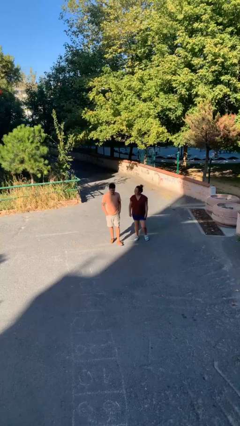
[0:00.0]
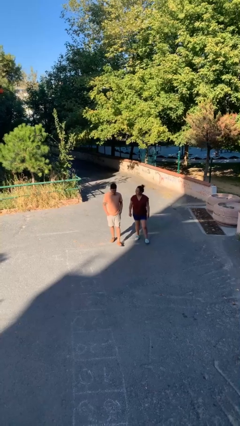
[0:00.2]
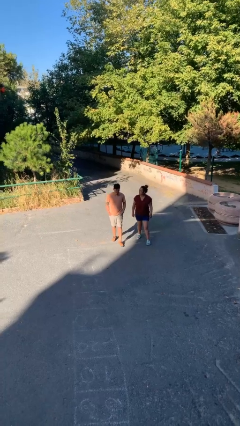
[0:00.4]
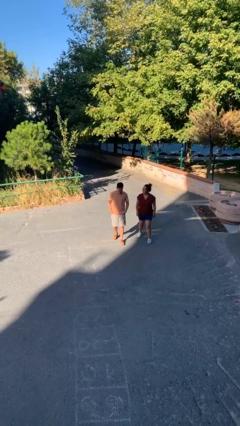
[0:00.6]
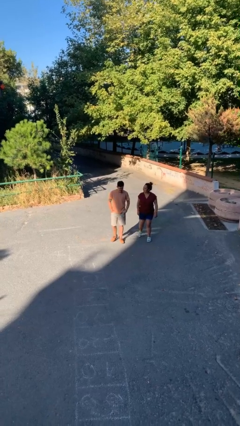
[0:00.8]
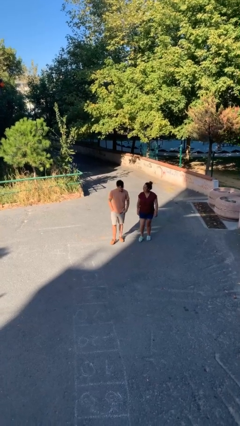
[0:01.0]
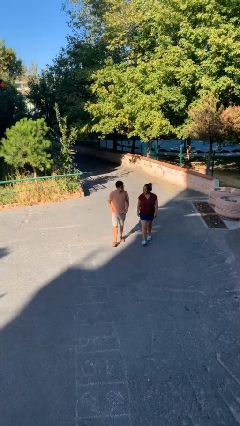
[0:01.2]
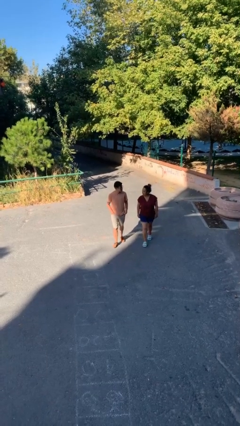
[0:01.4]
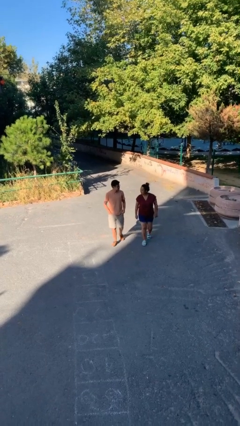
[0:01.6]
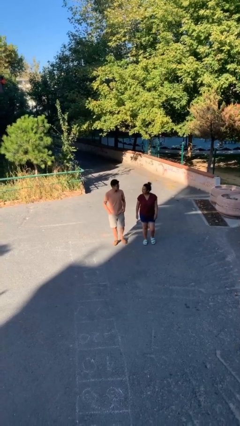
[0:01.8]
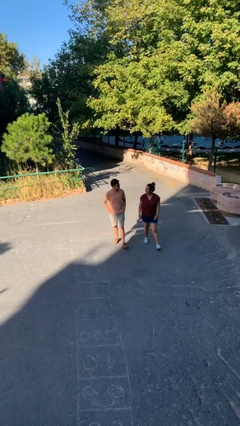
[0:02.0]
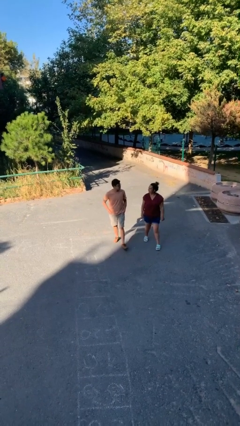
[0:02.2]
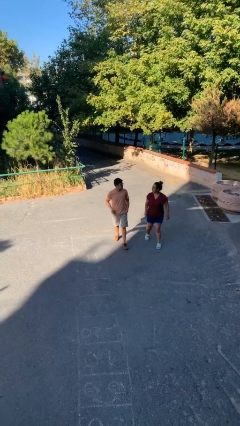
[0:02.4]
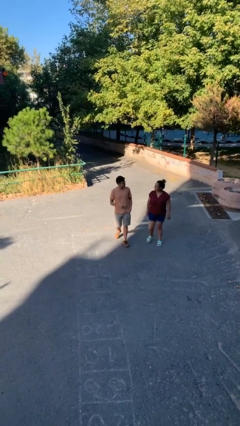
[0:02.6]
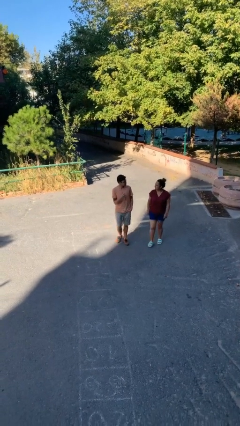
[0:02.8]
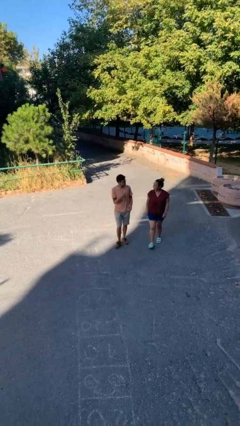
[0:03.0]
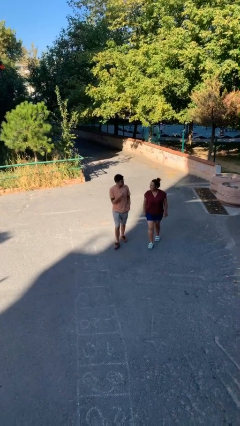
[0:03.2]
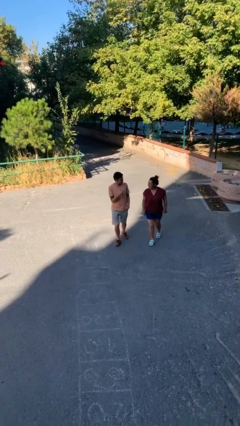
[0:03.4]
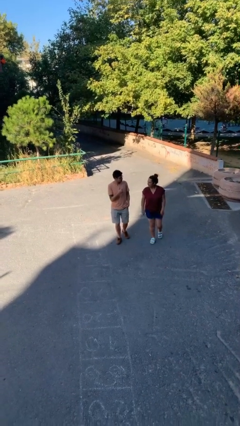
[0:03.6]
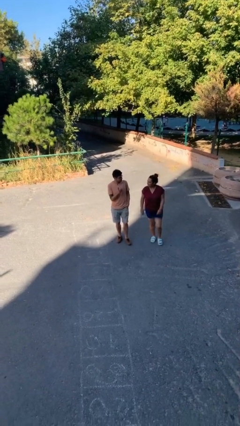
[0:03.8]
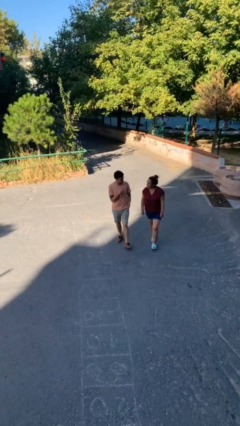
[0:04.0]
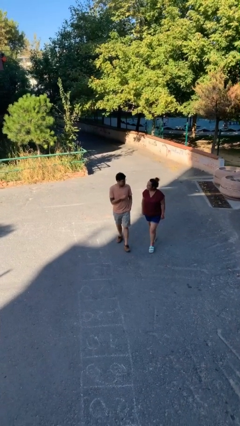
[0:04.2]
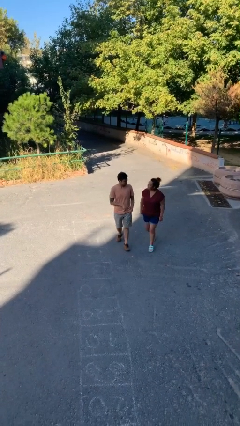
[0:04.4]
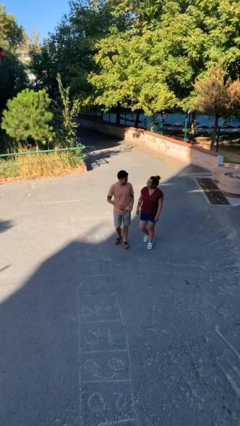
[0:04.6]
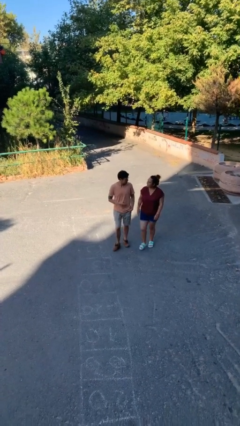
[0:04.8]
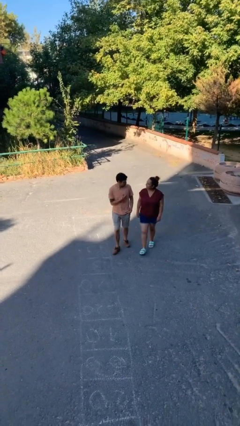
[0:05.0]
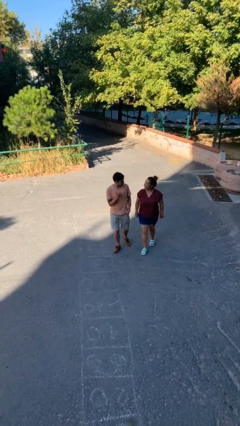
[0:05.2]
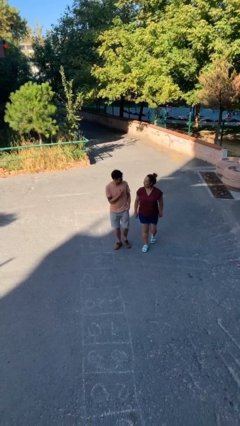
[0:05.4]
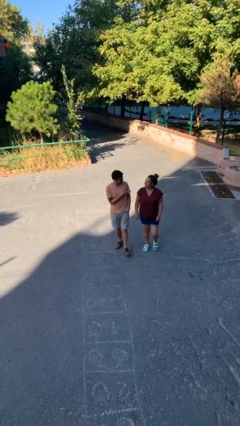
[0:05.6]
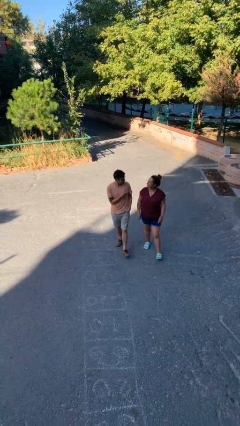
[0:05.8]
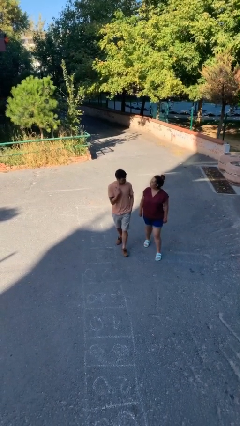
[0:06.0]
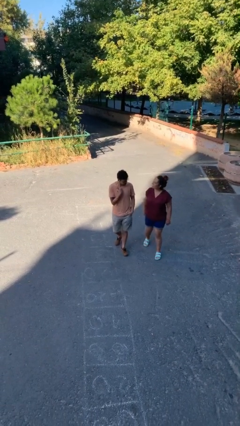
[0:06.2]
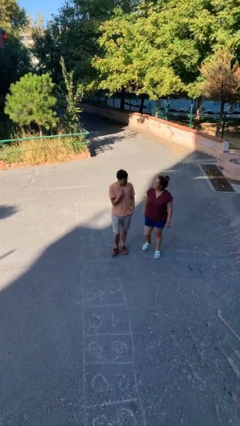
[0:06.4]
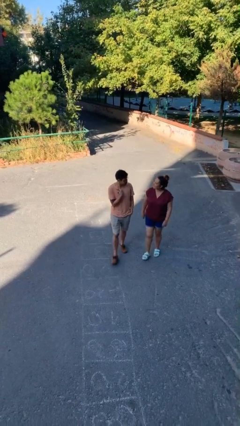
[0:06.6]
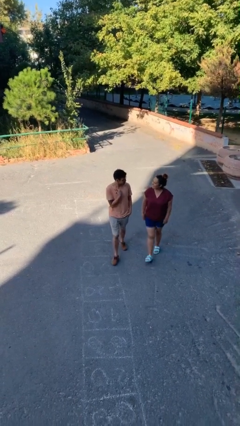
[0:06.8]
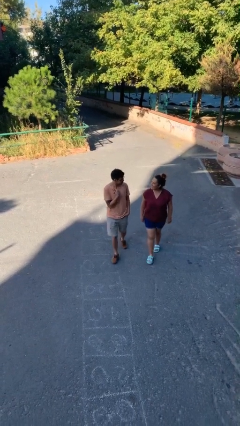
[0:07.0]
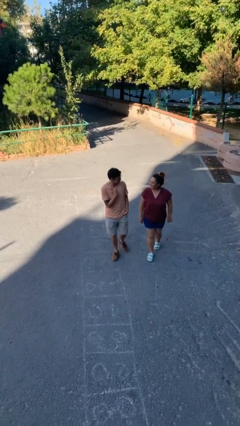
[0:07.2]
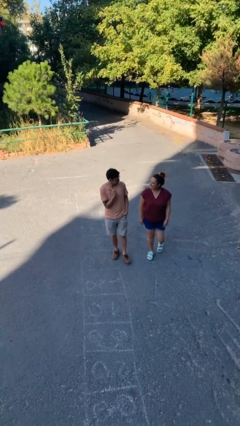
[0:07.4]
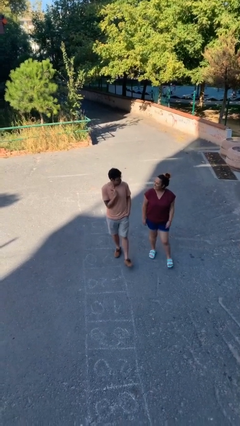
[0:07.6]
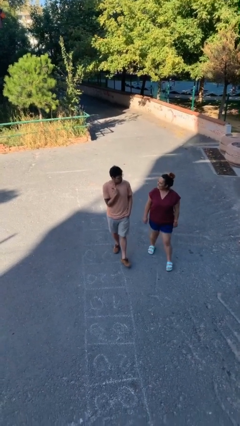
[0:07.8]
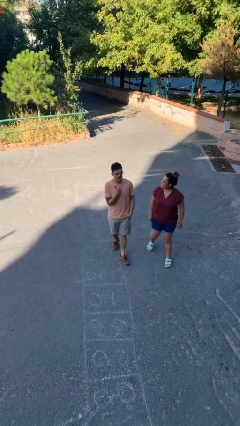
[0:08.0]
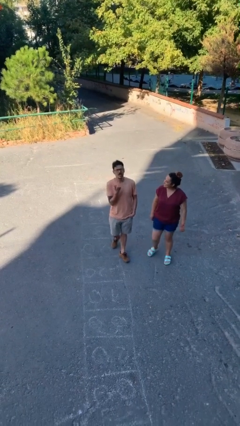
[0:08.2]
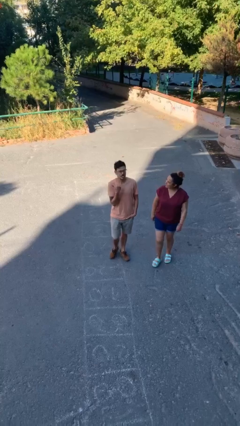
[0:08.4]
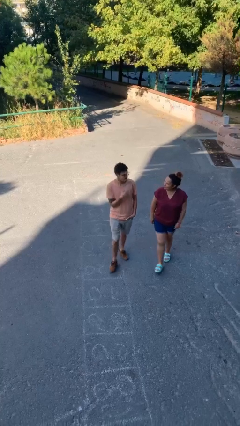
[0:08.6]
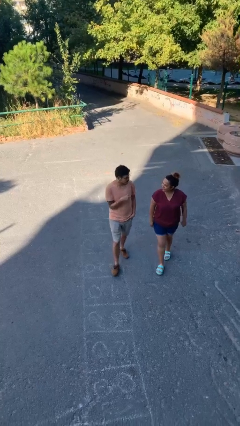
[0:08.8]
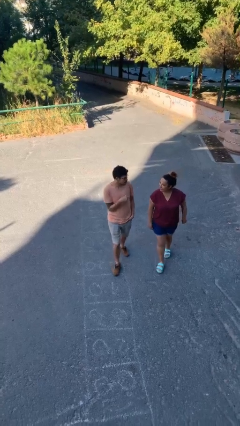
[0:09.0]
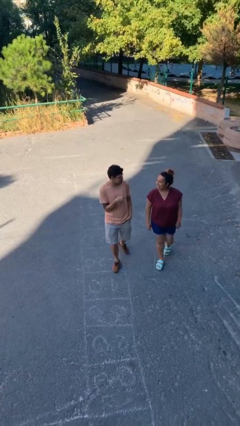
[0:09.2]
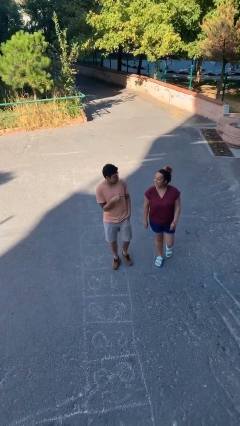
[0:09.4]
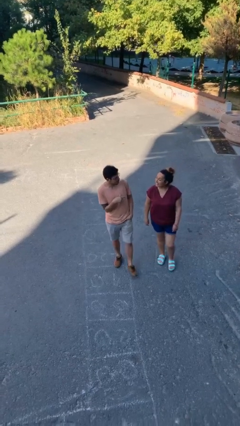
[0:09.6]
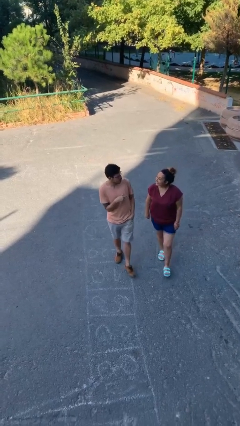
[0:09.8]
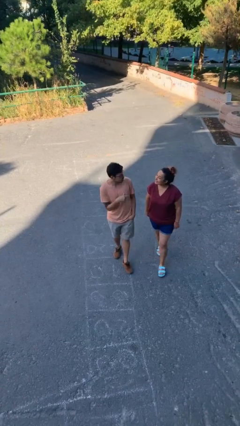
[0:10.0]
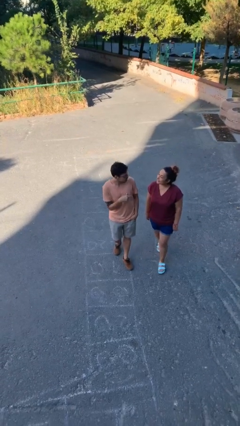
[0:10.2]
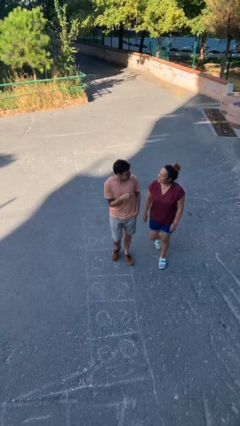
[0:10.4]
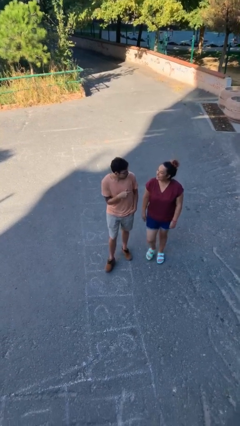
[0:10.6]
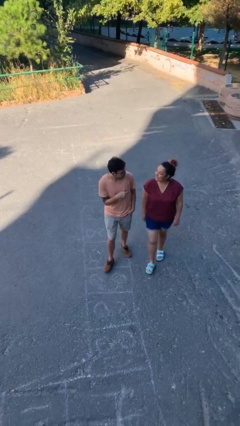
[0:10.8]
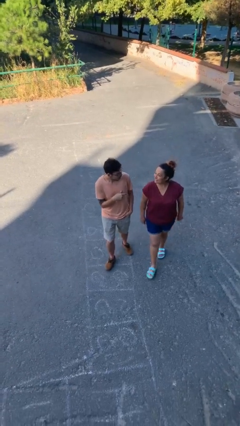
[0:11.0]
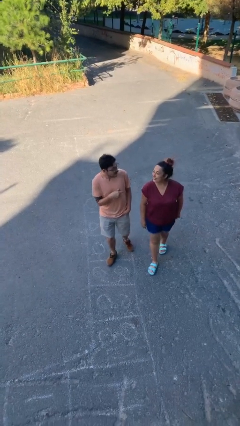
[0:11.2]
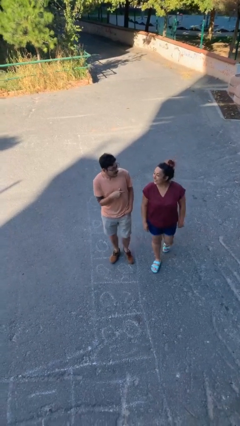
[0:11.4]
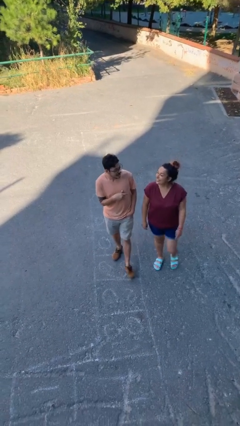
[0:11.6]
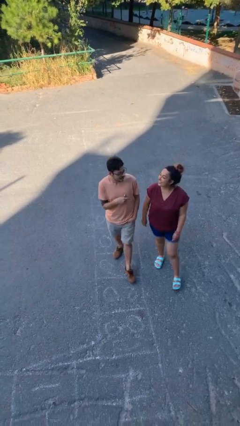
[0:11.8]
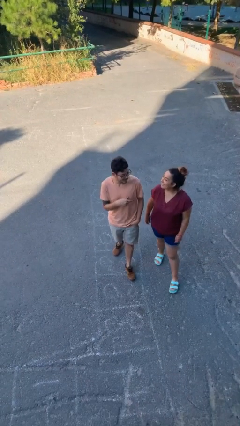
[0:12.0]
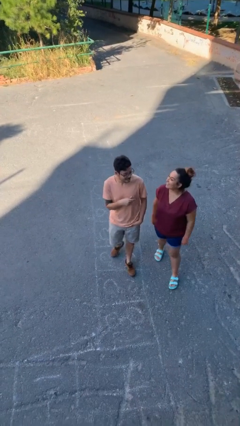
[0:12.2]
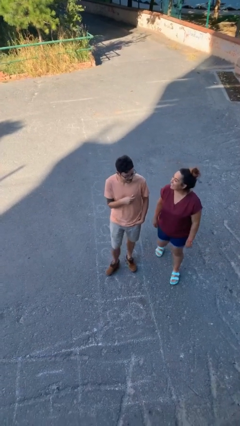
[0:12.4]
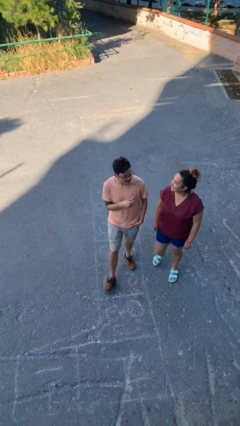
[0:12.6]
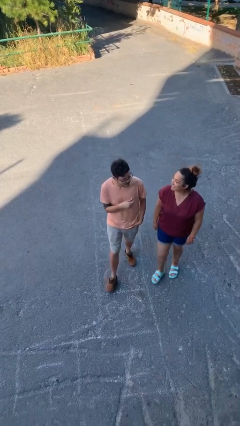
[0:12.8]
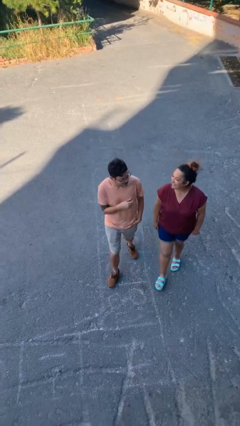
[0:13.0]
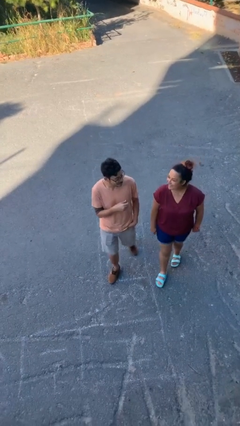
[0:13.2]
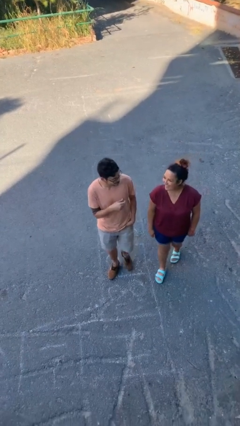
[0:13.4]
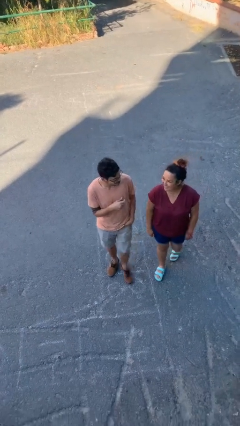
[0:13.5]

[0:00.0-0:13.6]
person talks to person

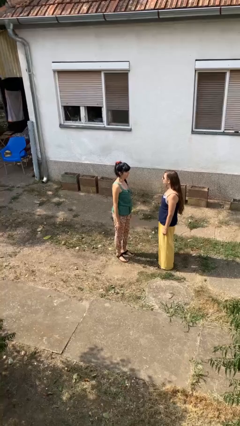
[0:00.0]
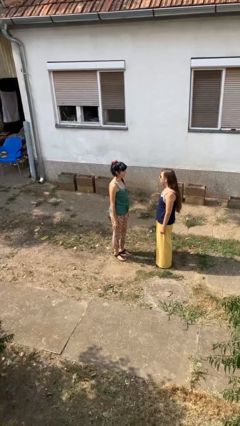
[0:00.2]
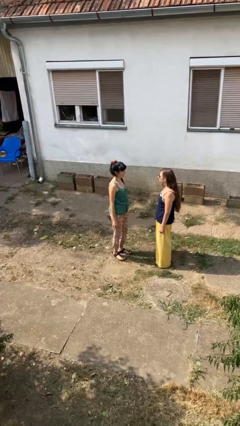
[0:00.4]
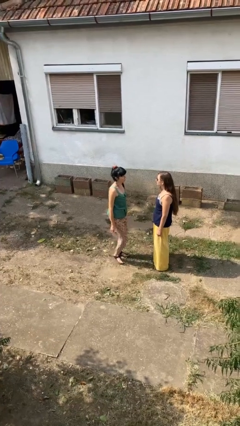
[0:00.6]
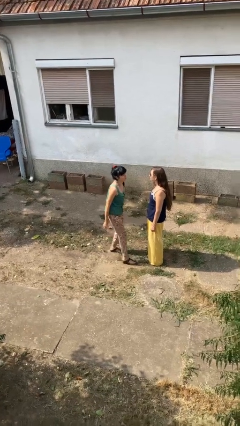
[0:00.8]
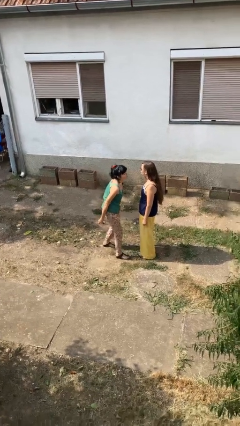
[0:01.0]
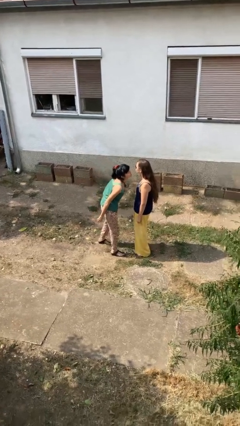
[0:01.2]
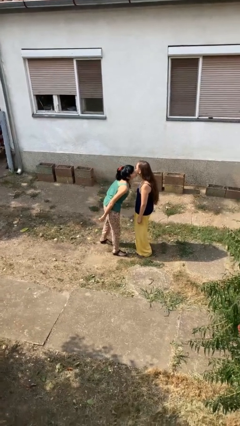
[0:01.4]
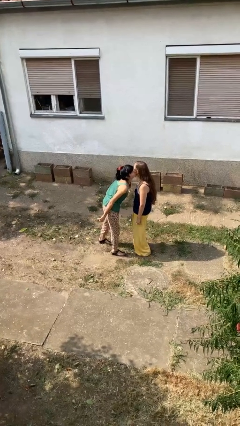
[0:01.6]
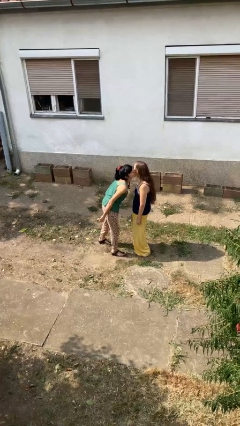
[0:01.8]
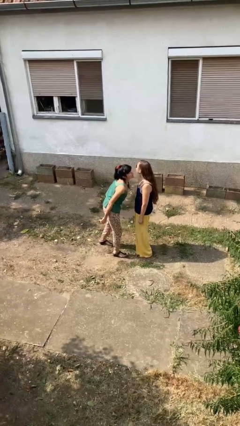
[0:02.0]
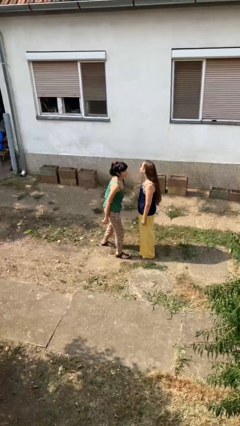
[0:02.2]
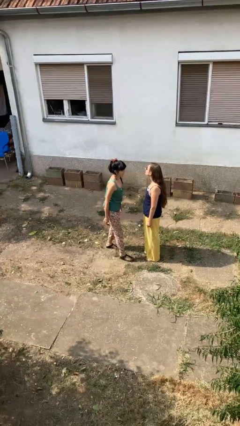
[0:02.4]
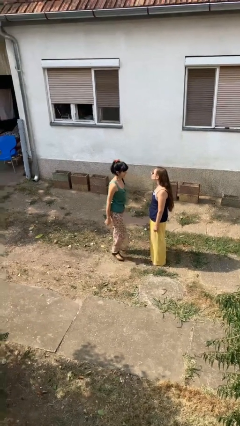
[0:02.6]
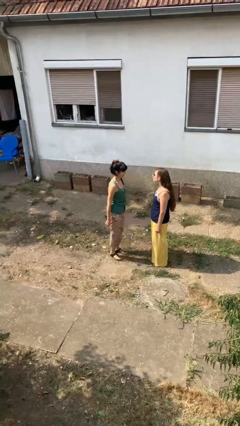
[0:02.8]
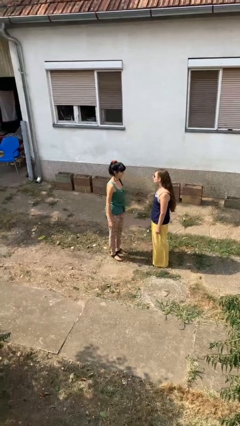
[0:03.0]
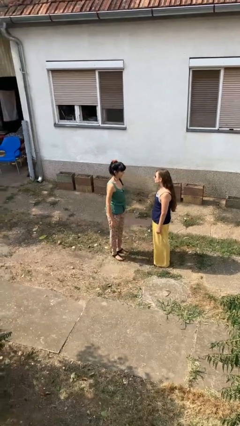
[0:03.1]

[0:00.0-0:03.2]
person kisses cheek of person

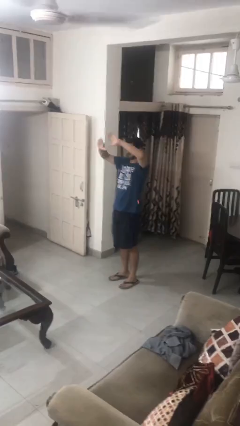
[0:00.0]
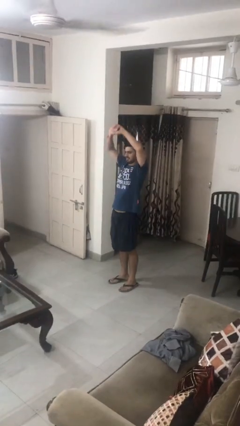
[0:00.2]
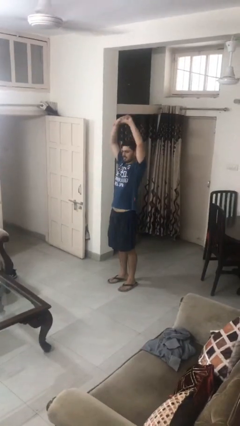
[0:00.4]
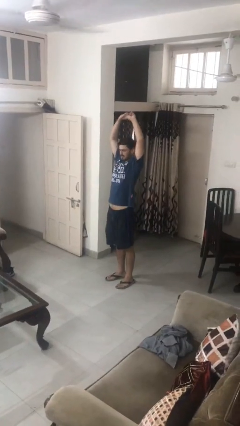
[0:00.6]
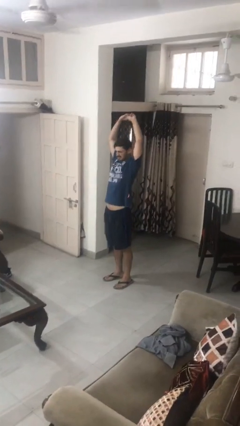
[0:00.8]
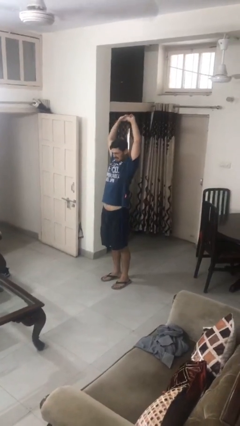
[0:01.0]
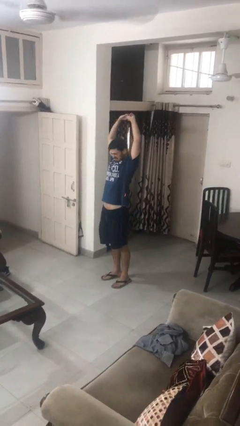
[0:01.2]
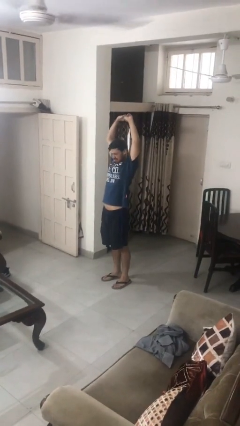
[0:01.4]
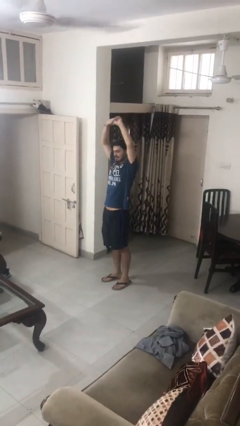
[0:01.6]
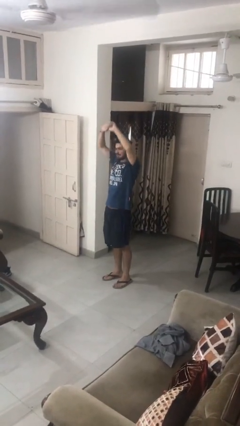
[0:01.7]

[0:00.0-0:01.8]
person stretches arms over head
